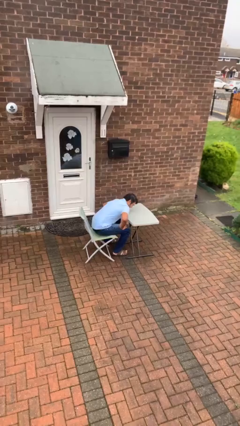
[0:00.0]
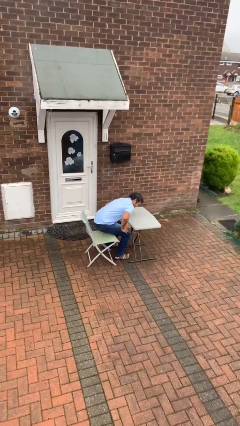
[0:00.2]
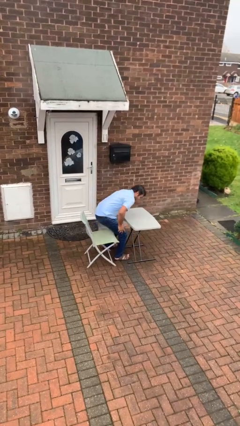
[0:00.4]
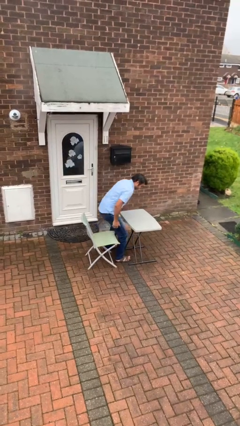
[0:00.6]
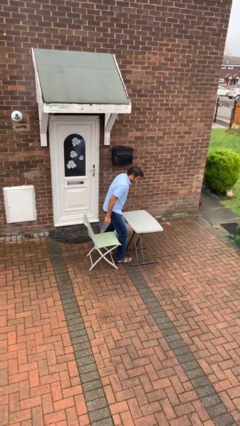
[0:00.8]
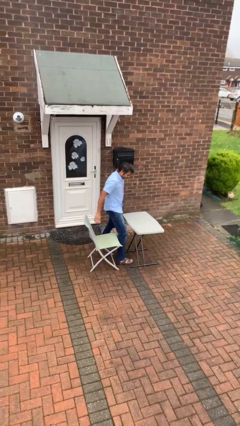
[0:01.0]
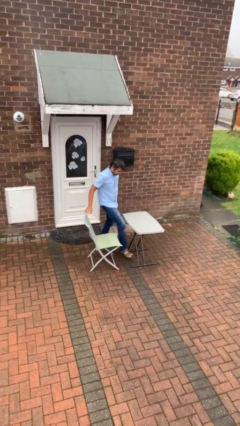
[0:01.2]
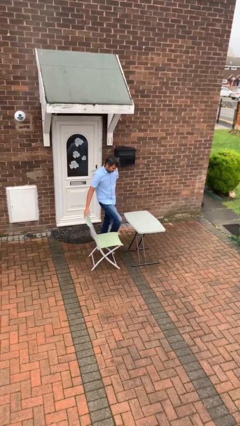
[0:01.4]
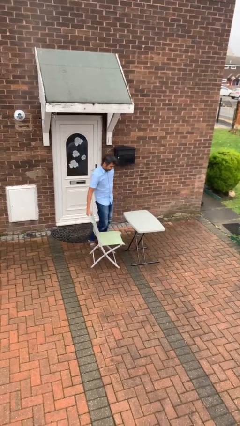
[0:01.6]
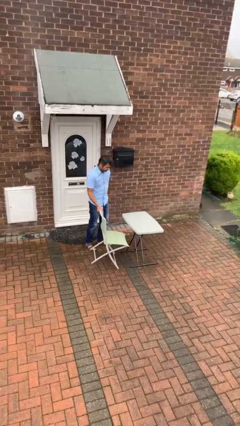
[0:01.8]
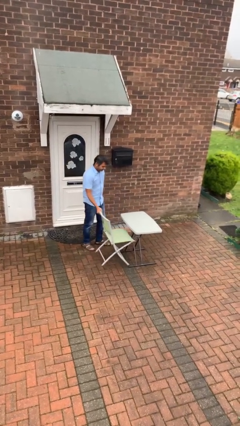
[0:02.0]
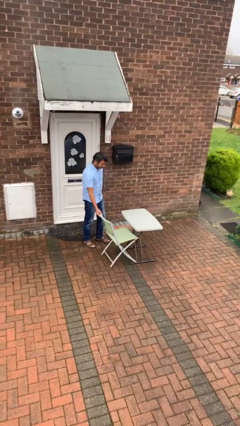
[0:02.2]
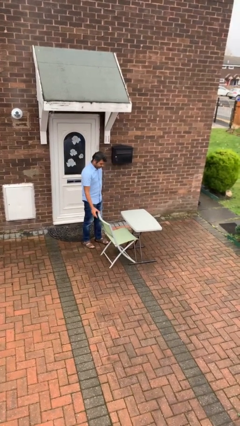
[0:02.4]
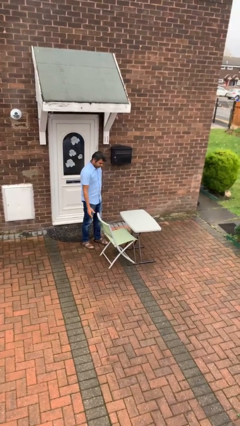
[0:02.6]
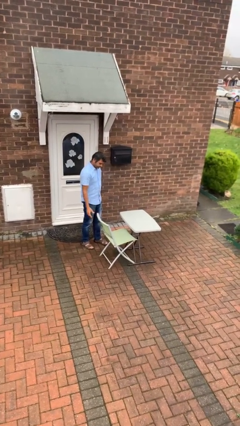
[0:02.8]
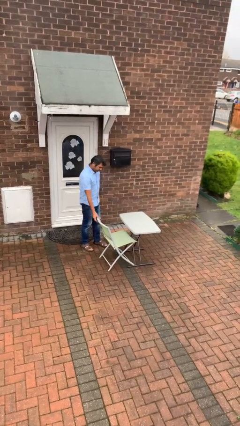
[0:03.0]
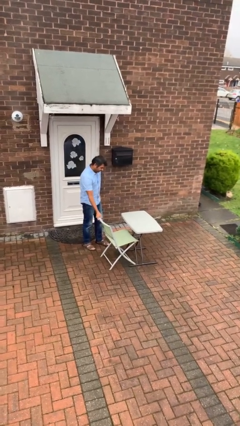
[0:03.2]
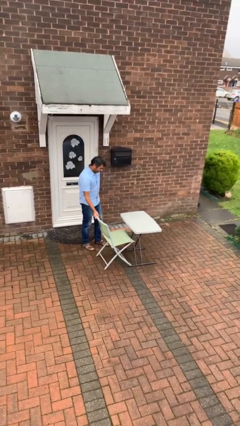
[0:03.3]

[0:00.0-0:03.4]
person stands up

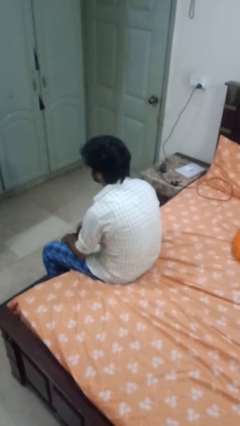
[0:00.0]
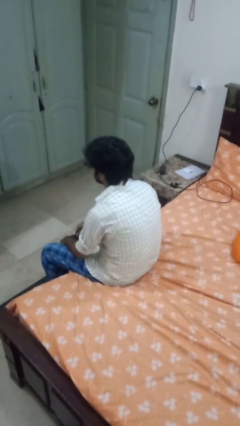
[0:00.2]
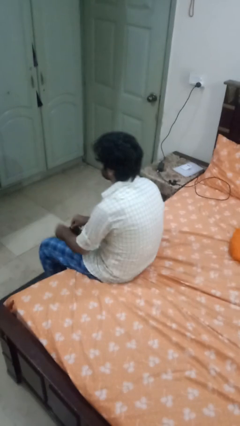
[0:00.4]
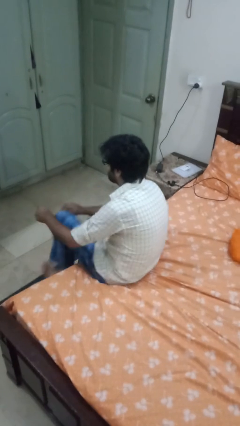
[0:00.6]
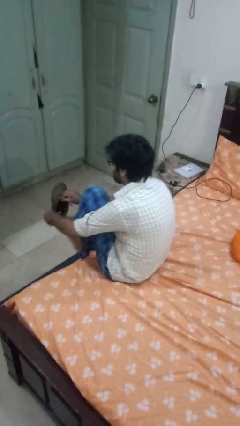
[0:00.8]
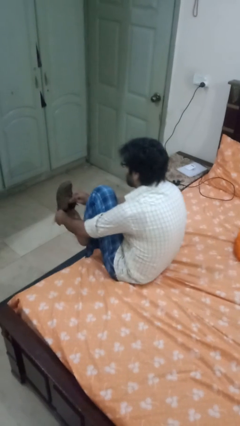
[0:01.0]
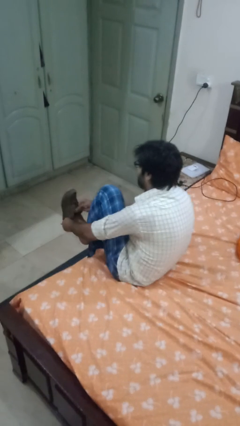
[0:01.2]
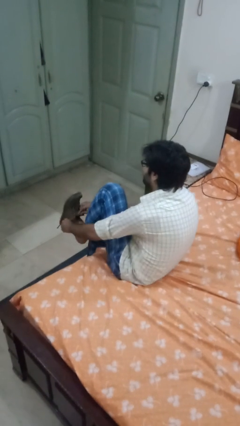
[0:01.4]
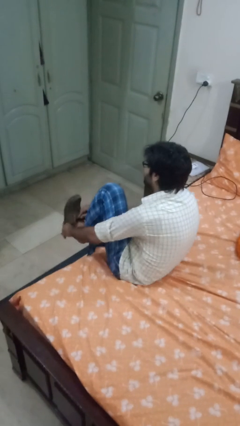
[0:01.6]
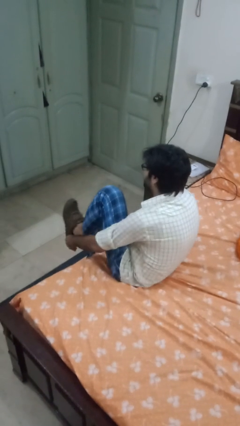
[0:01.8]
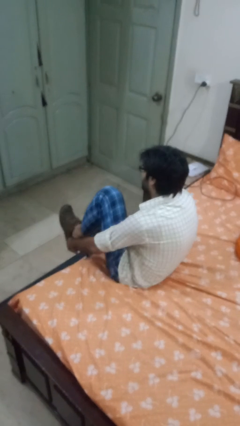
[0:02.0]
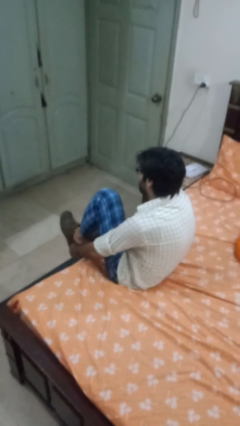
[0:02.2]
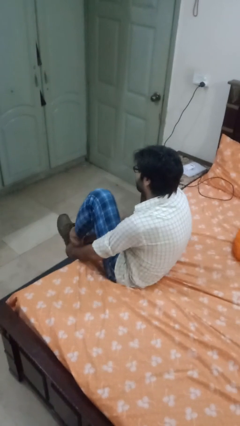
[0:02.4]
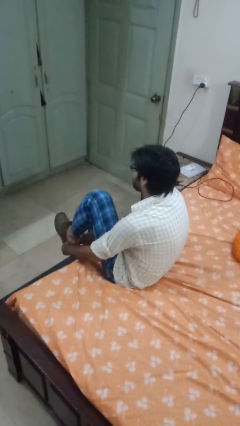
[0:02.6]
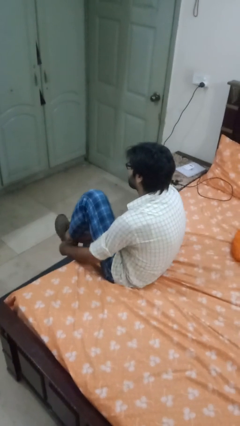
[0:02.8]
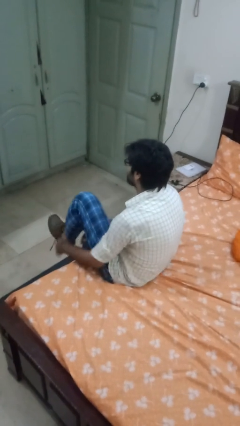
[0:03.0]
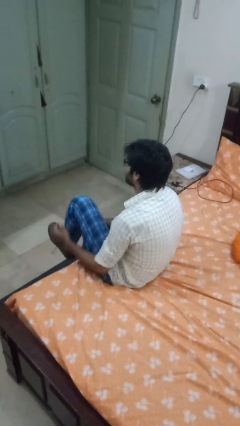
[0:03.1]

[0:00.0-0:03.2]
person puts on shoes

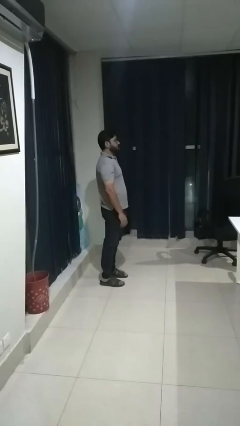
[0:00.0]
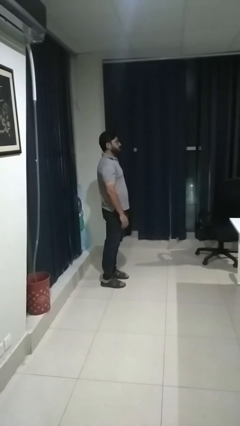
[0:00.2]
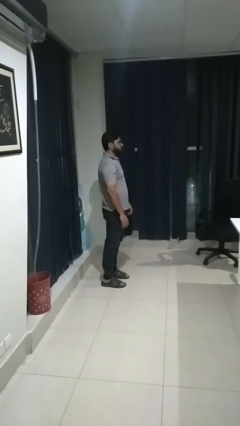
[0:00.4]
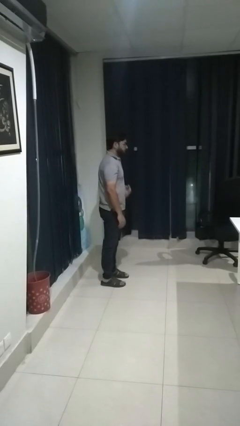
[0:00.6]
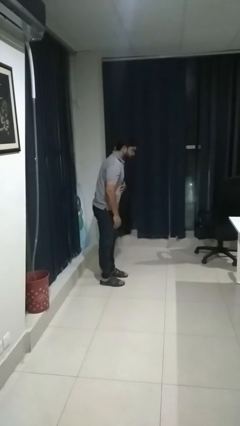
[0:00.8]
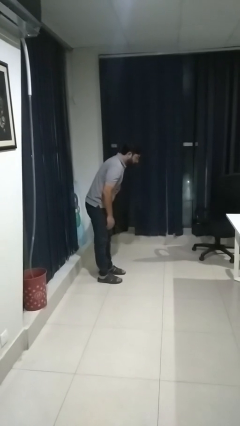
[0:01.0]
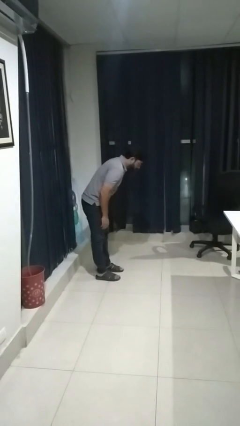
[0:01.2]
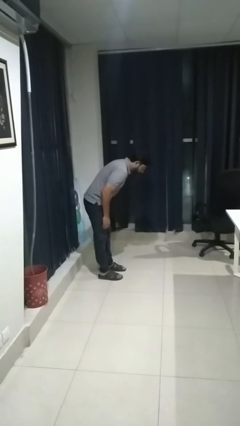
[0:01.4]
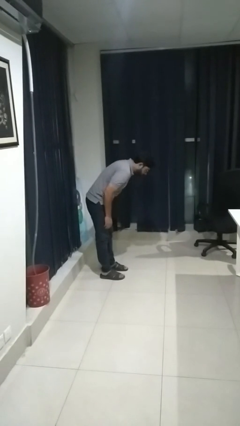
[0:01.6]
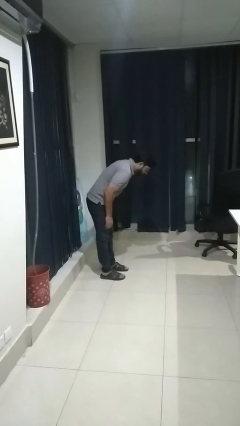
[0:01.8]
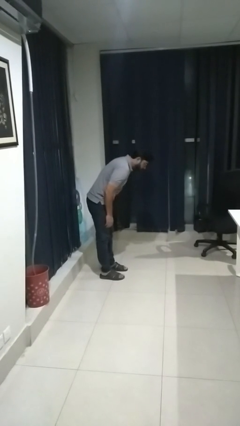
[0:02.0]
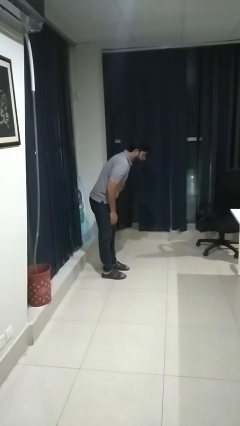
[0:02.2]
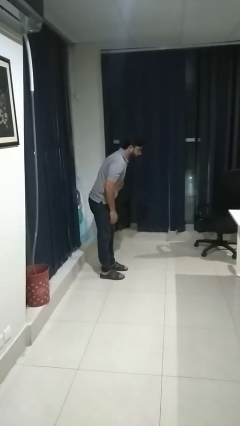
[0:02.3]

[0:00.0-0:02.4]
person bows

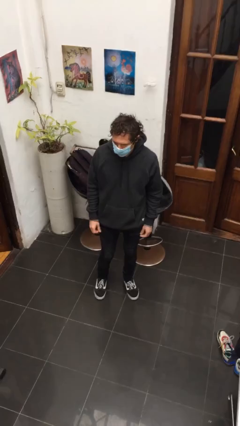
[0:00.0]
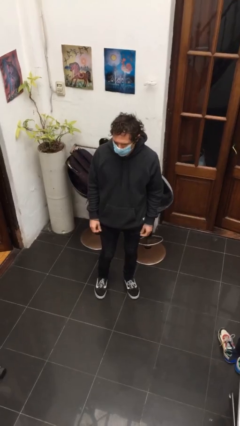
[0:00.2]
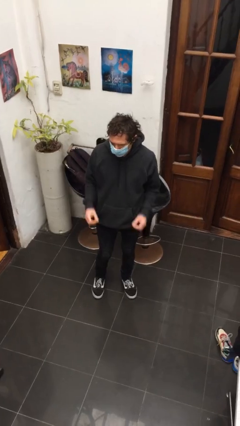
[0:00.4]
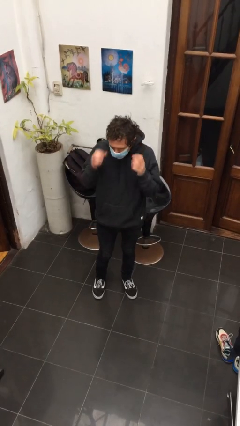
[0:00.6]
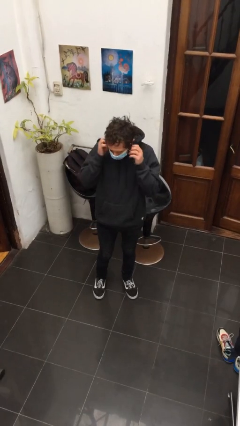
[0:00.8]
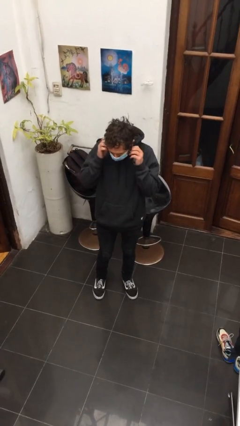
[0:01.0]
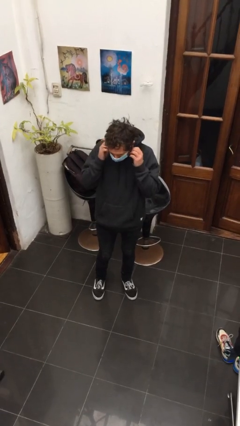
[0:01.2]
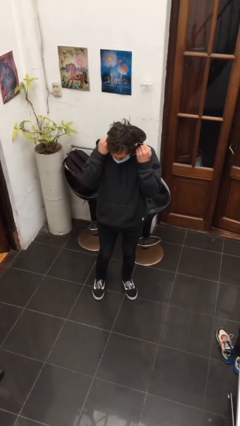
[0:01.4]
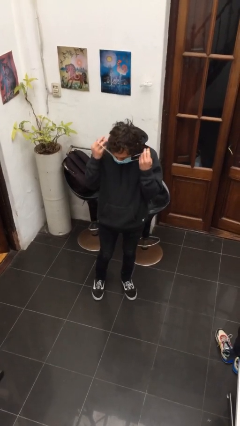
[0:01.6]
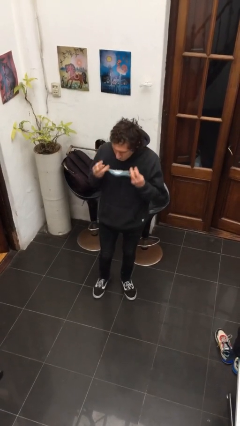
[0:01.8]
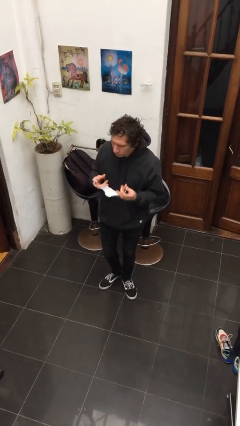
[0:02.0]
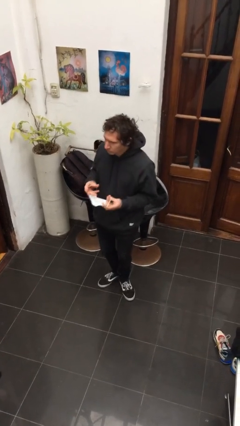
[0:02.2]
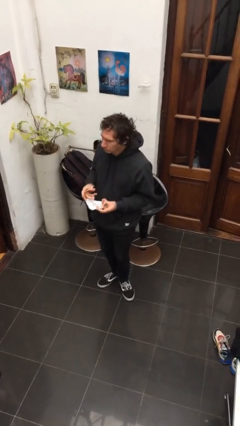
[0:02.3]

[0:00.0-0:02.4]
person takes off facemask

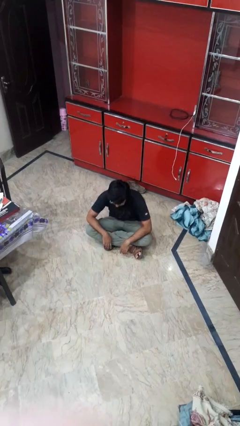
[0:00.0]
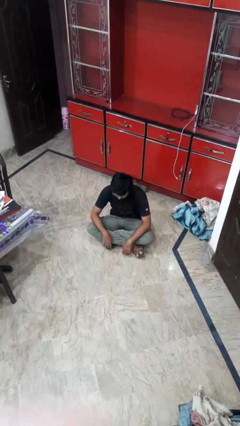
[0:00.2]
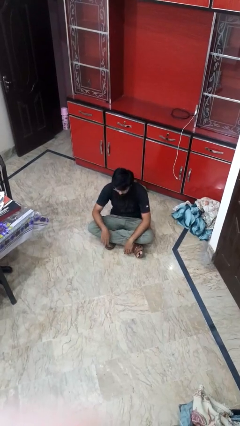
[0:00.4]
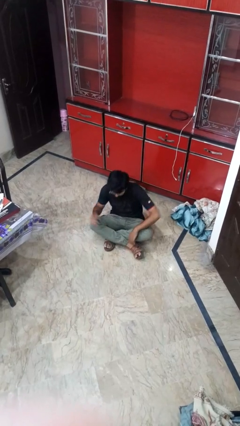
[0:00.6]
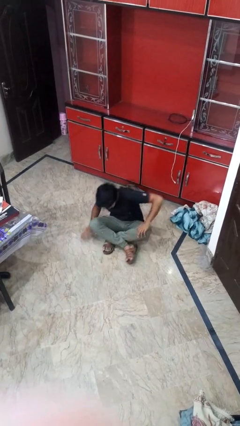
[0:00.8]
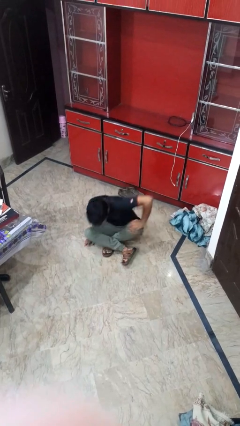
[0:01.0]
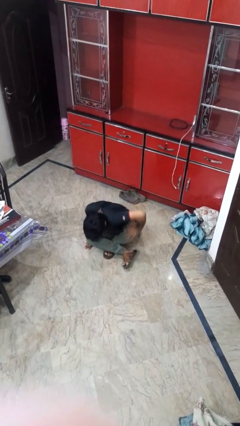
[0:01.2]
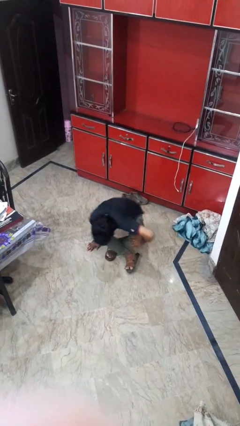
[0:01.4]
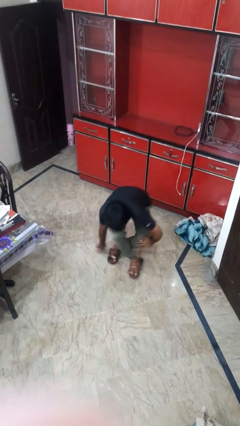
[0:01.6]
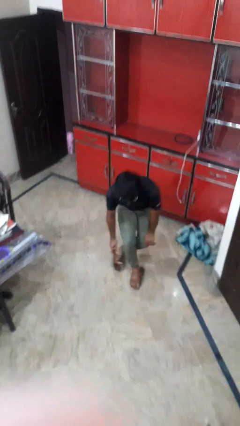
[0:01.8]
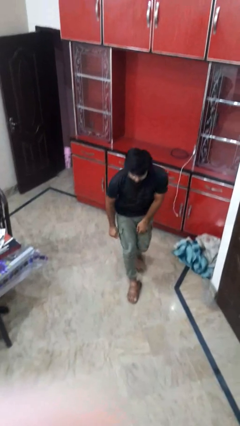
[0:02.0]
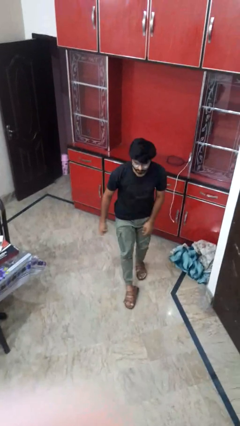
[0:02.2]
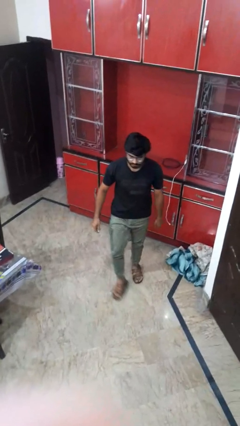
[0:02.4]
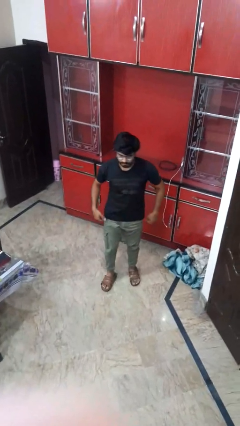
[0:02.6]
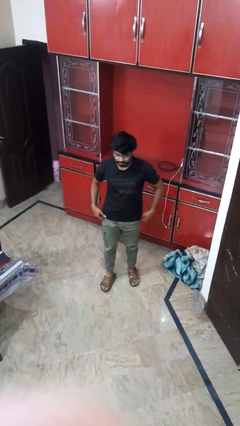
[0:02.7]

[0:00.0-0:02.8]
person stands up from floor

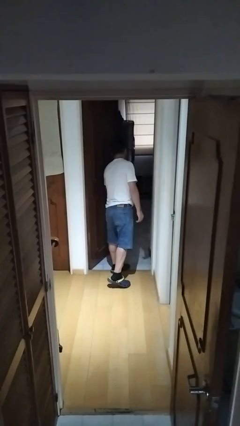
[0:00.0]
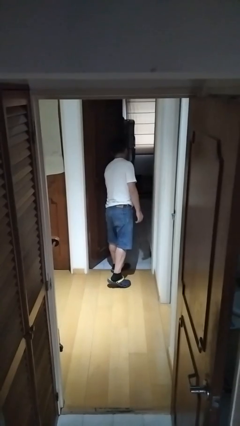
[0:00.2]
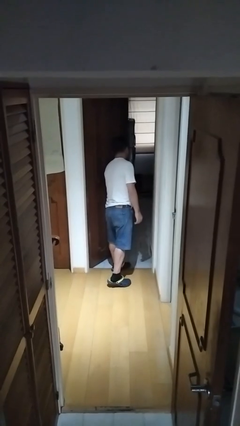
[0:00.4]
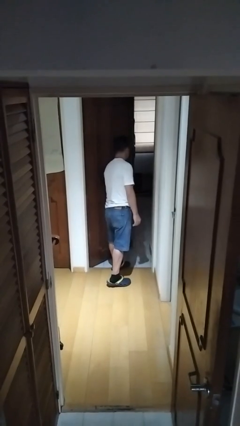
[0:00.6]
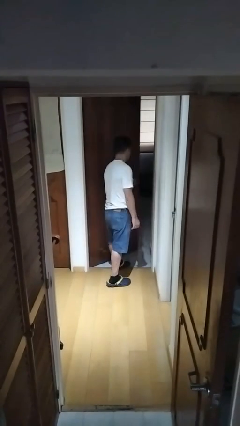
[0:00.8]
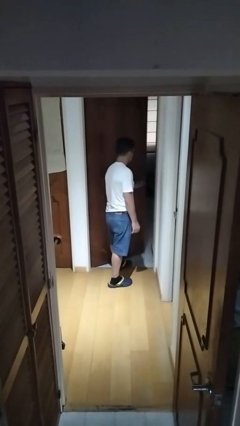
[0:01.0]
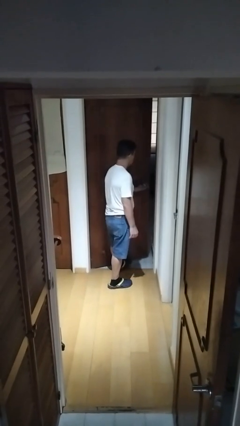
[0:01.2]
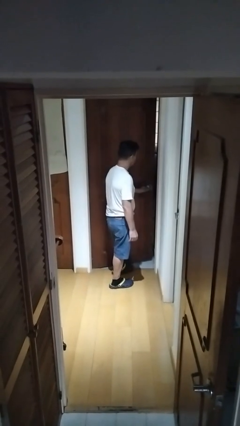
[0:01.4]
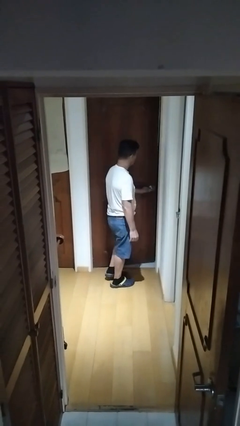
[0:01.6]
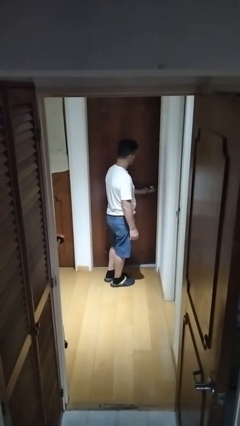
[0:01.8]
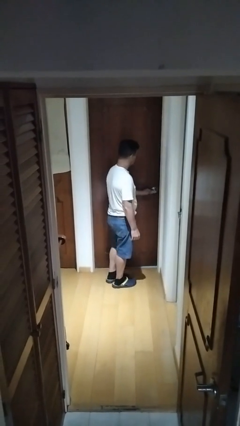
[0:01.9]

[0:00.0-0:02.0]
person closes facility door

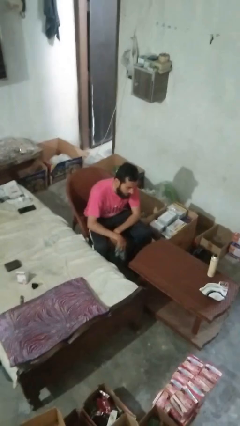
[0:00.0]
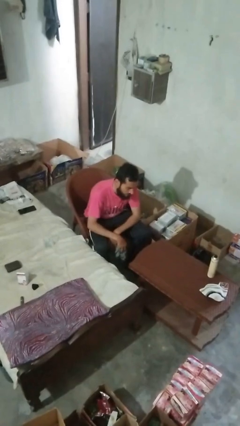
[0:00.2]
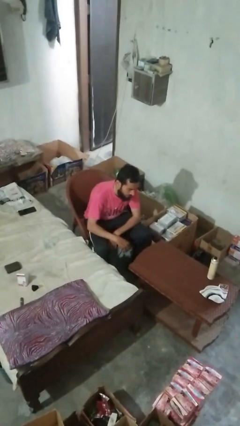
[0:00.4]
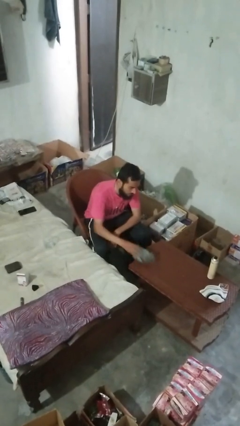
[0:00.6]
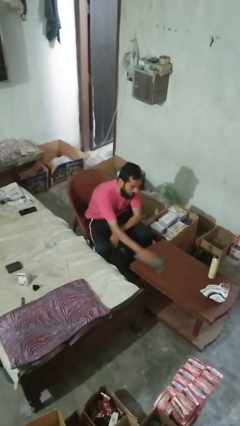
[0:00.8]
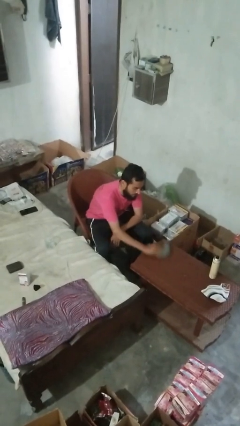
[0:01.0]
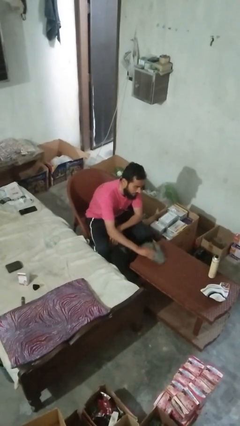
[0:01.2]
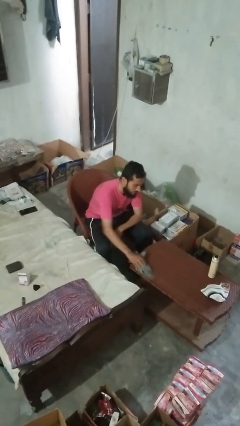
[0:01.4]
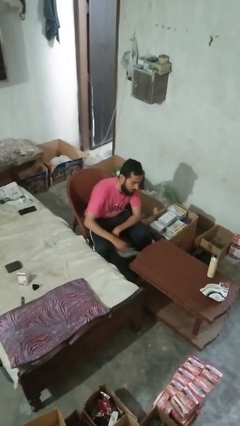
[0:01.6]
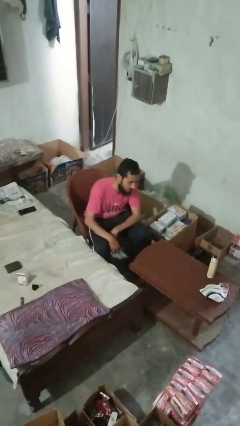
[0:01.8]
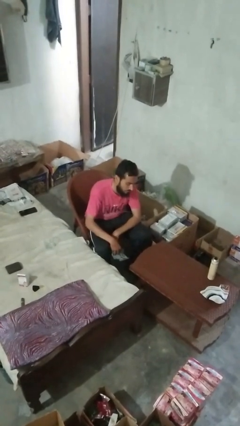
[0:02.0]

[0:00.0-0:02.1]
person cleans table with rag
